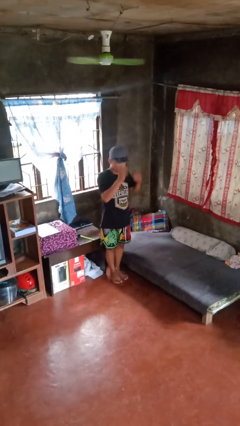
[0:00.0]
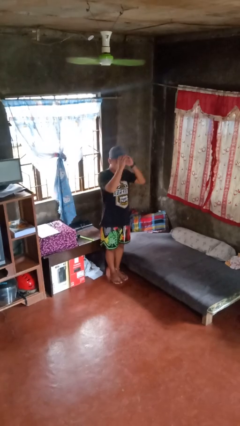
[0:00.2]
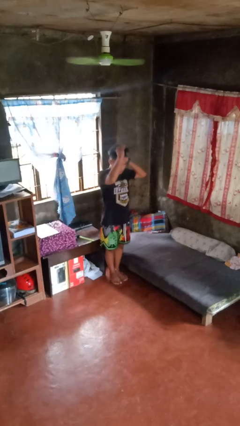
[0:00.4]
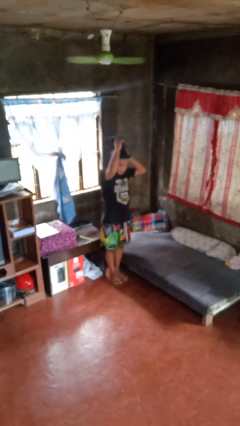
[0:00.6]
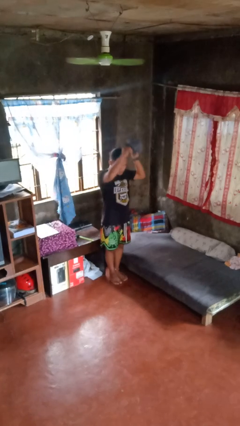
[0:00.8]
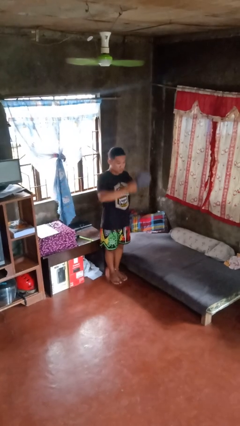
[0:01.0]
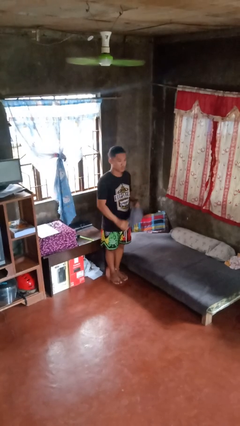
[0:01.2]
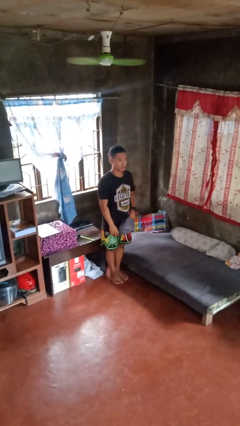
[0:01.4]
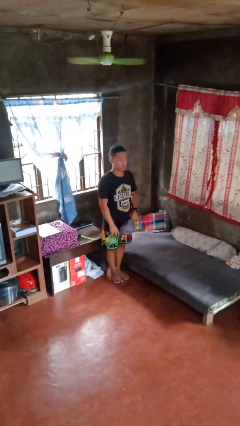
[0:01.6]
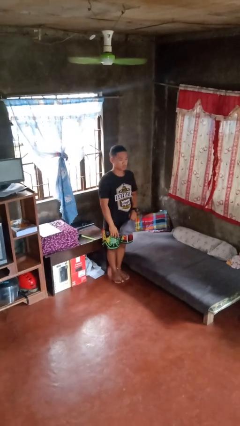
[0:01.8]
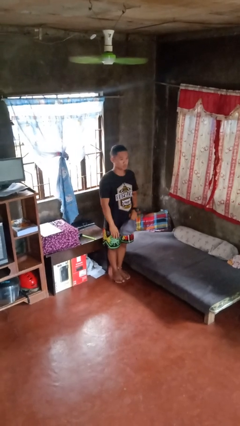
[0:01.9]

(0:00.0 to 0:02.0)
person takes off hat

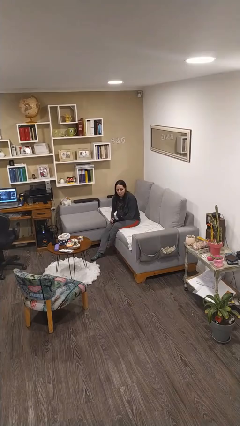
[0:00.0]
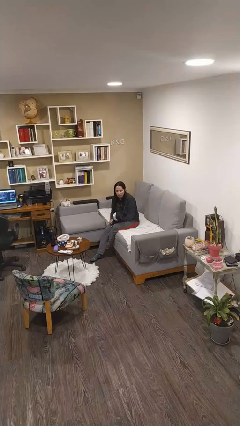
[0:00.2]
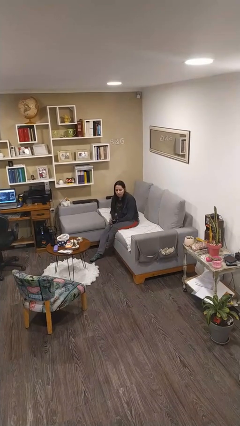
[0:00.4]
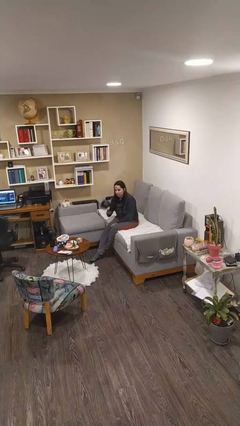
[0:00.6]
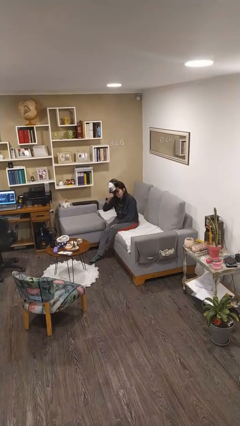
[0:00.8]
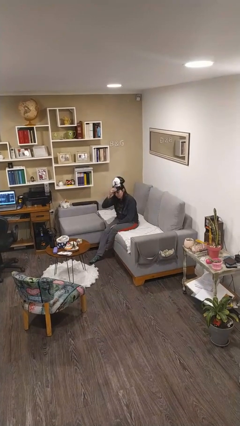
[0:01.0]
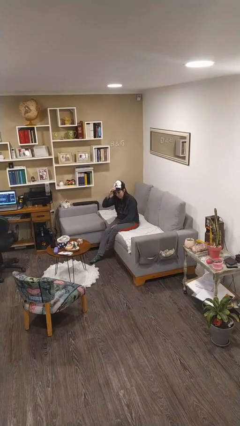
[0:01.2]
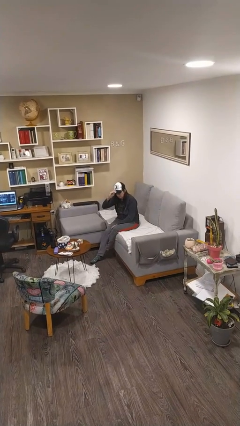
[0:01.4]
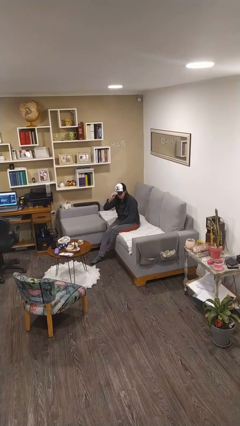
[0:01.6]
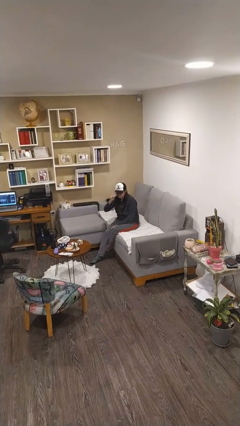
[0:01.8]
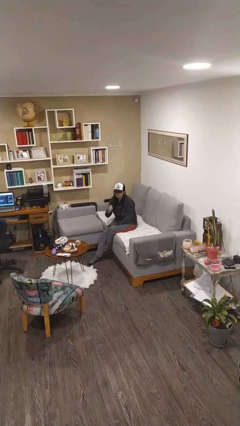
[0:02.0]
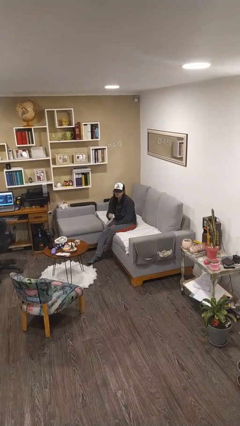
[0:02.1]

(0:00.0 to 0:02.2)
person puts on hat

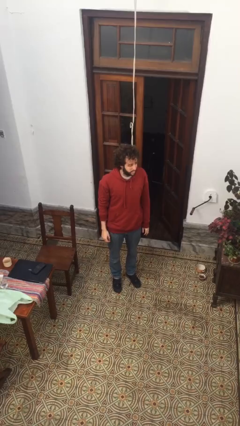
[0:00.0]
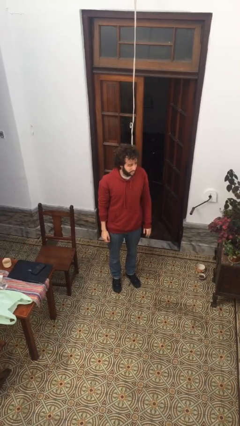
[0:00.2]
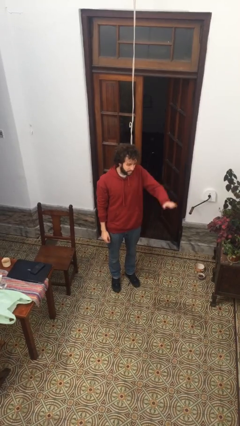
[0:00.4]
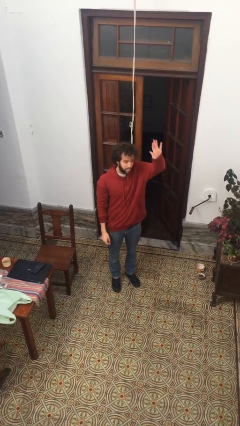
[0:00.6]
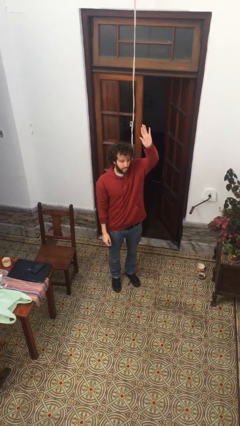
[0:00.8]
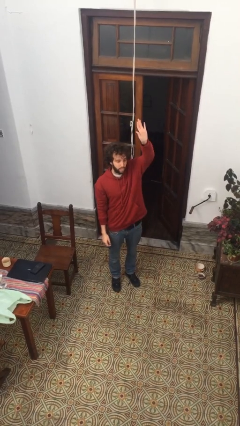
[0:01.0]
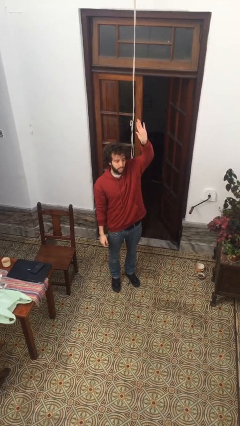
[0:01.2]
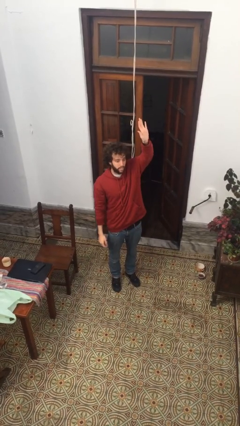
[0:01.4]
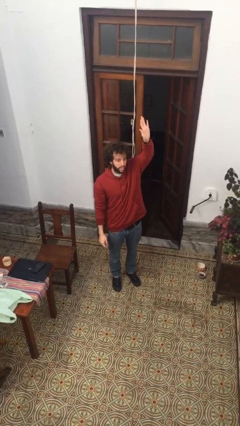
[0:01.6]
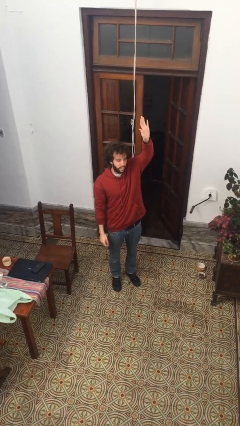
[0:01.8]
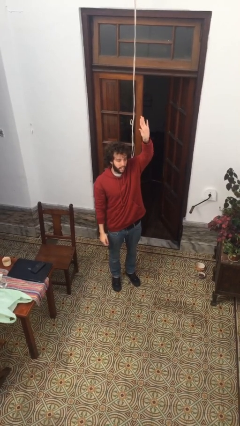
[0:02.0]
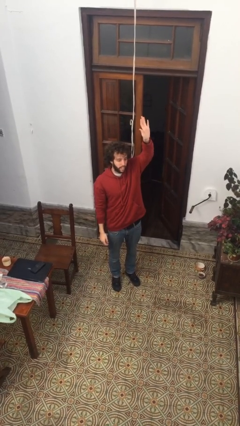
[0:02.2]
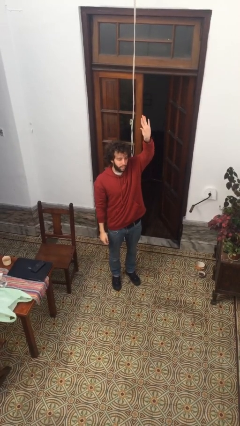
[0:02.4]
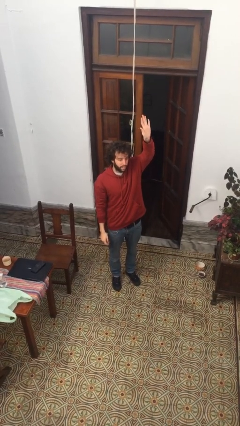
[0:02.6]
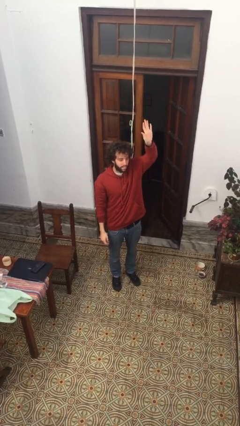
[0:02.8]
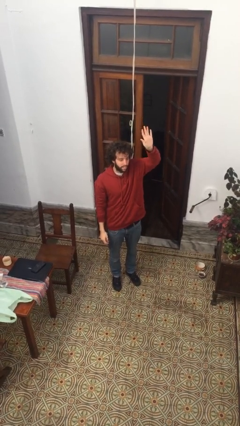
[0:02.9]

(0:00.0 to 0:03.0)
person gestures raise hand

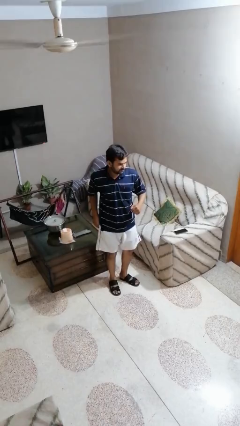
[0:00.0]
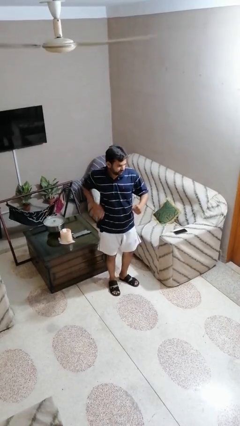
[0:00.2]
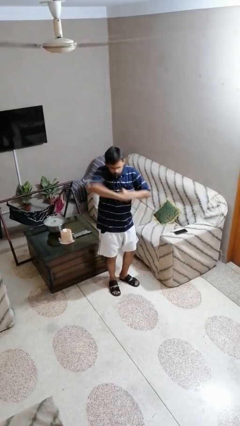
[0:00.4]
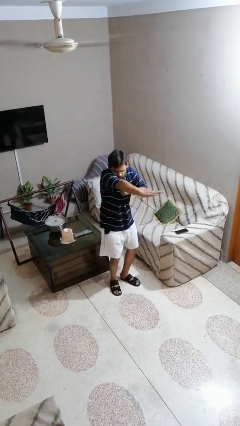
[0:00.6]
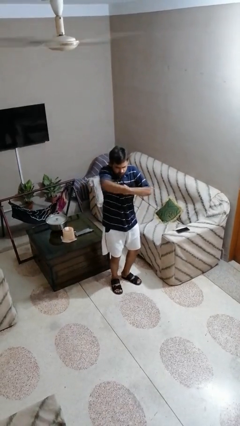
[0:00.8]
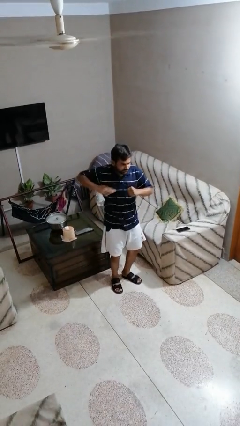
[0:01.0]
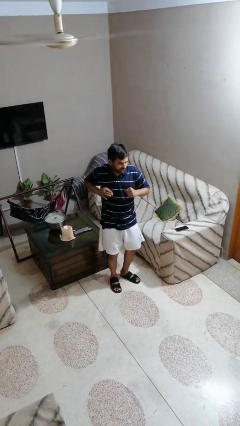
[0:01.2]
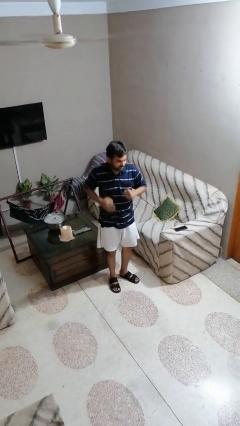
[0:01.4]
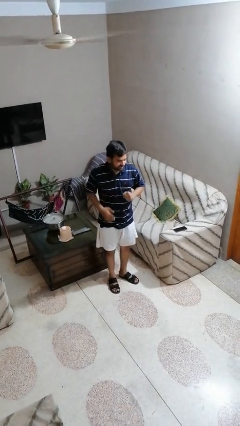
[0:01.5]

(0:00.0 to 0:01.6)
person karate chop

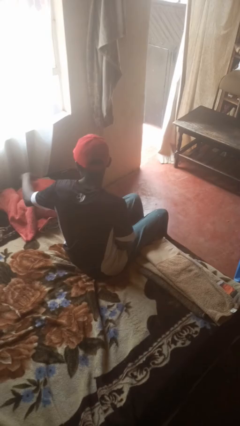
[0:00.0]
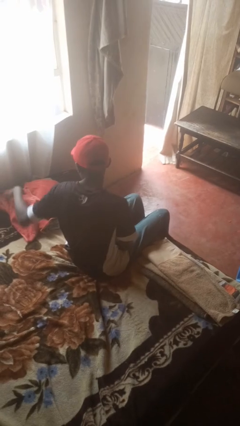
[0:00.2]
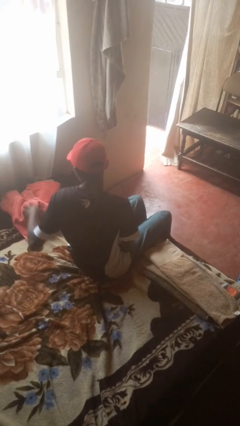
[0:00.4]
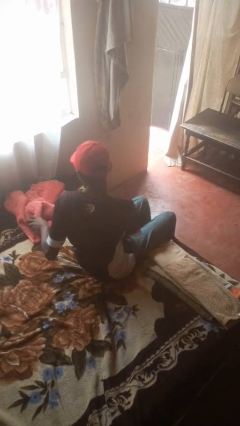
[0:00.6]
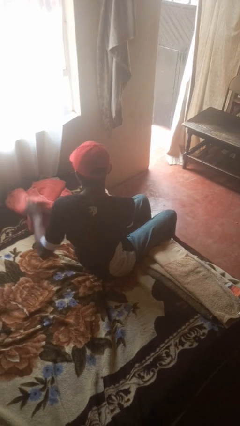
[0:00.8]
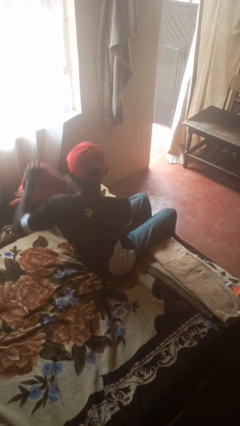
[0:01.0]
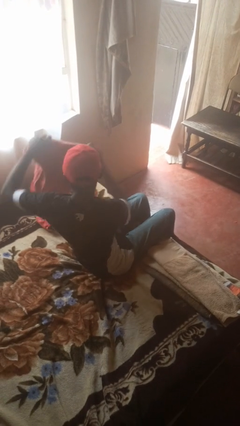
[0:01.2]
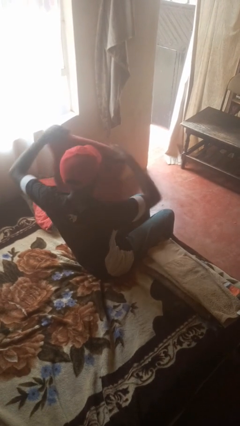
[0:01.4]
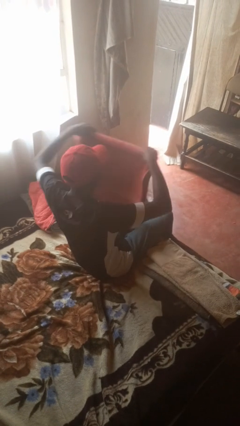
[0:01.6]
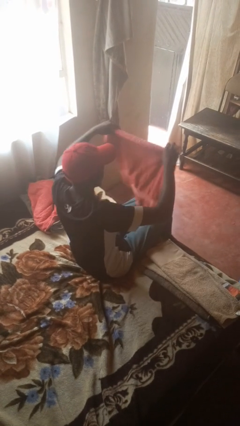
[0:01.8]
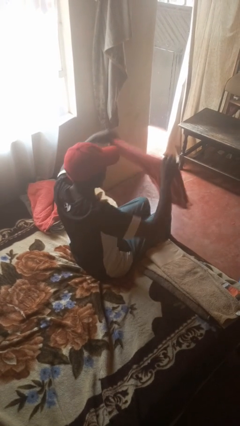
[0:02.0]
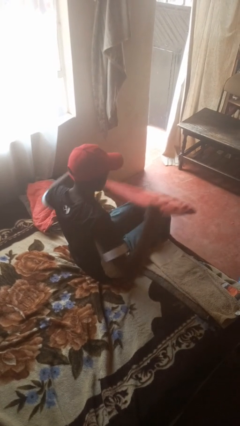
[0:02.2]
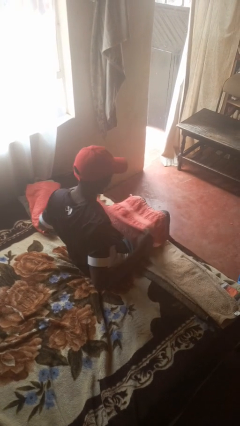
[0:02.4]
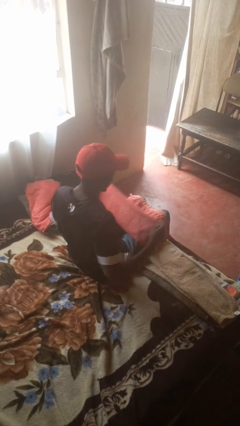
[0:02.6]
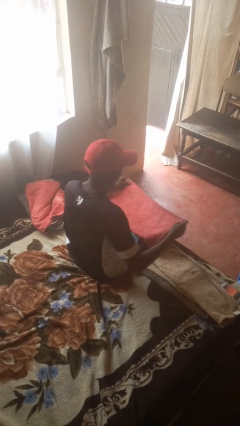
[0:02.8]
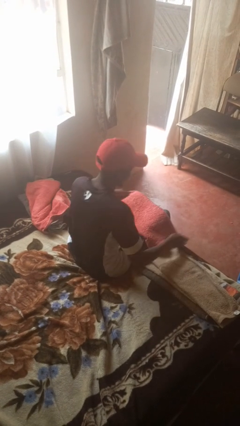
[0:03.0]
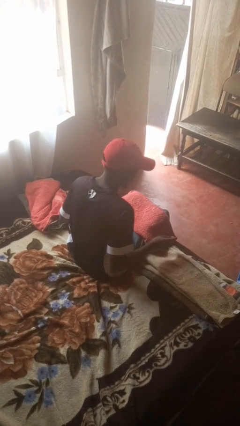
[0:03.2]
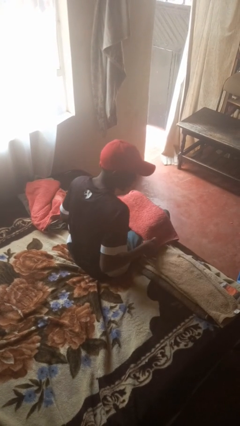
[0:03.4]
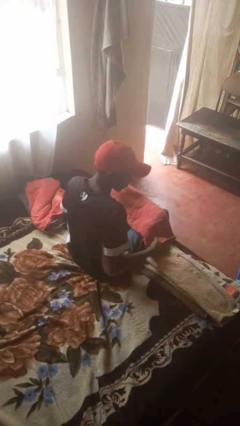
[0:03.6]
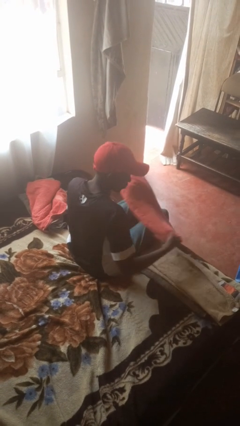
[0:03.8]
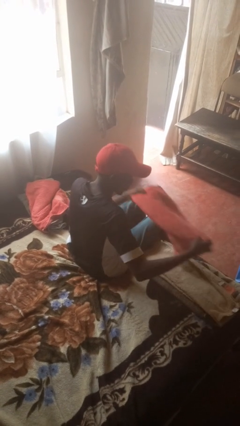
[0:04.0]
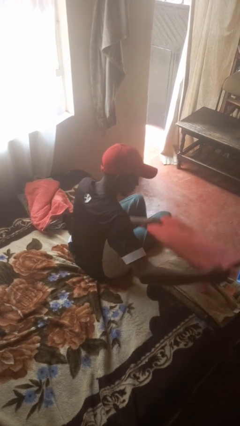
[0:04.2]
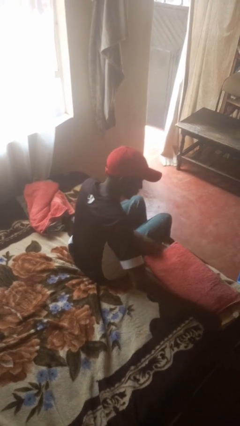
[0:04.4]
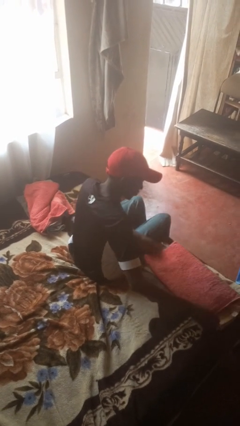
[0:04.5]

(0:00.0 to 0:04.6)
person folds towel

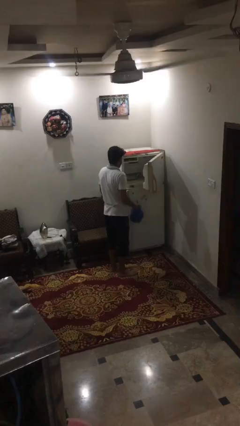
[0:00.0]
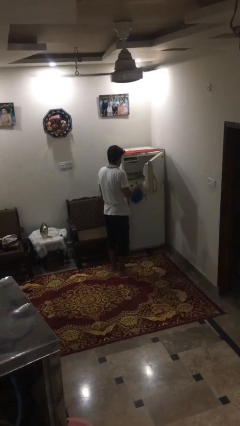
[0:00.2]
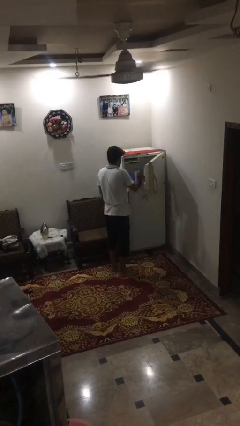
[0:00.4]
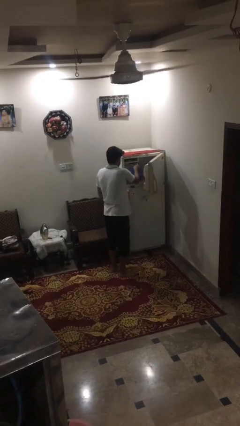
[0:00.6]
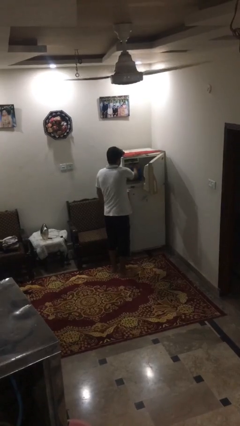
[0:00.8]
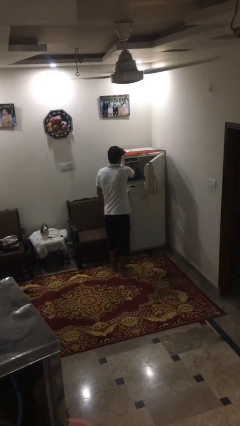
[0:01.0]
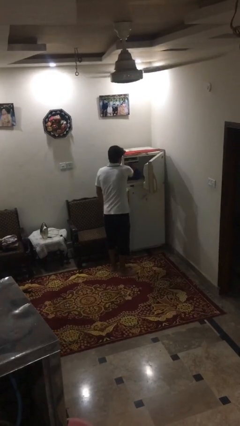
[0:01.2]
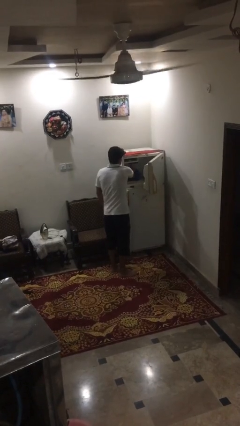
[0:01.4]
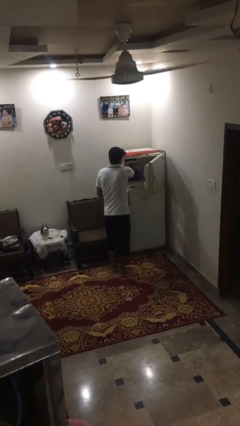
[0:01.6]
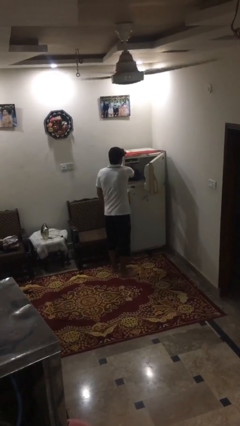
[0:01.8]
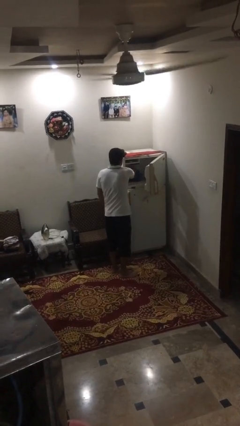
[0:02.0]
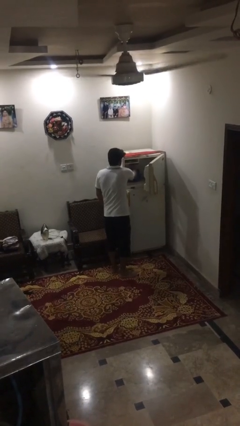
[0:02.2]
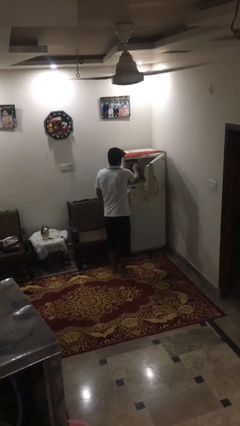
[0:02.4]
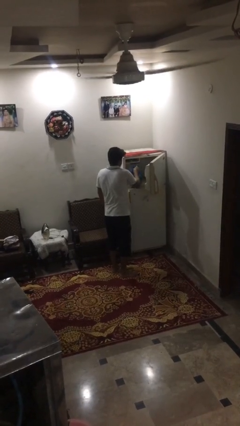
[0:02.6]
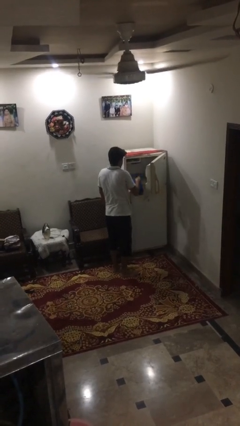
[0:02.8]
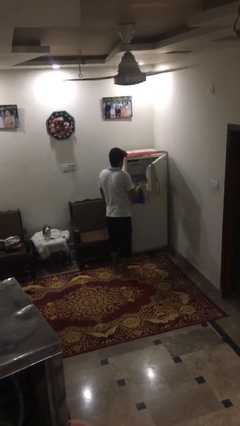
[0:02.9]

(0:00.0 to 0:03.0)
person loads groceries into refrigerator

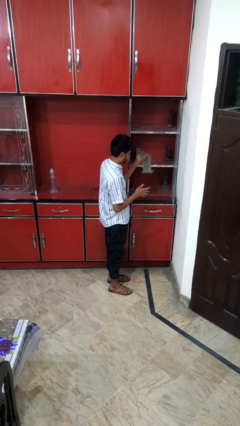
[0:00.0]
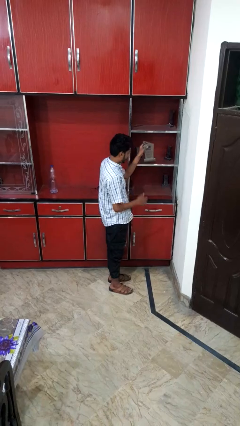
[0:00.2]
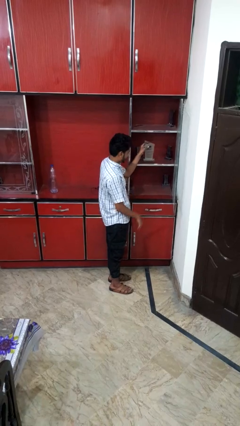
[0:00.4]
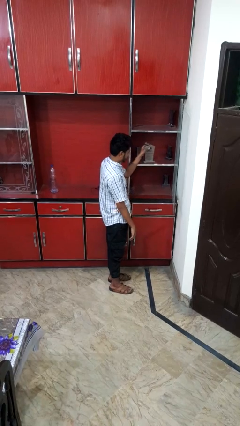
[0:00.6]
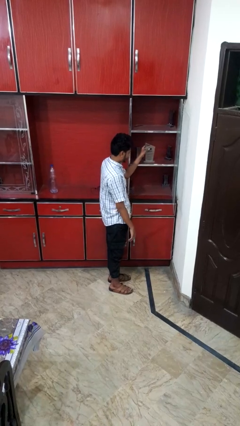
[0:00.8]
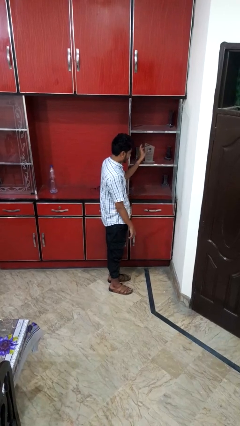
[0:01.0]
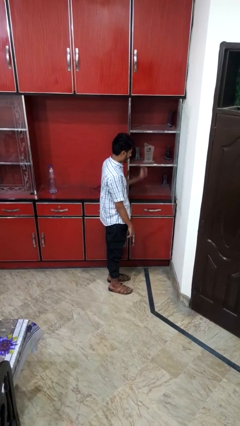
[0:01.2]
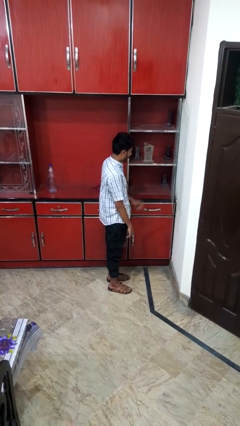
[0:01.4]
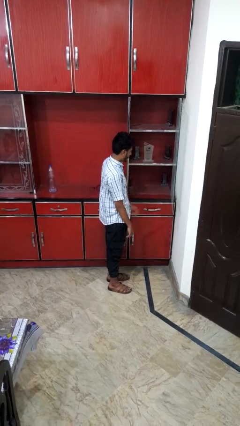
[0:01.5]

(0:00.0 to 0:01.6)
person puts down object into cabinet
